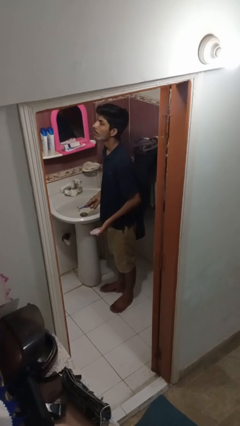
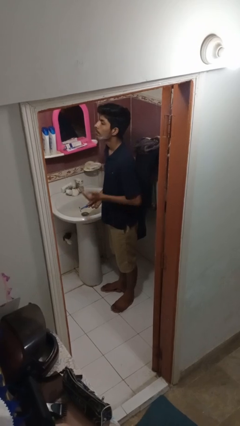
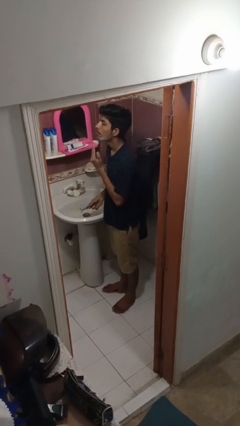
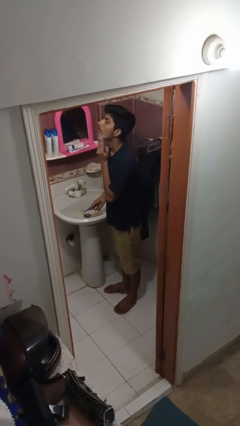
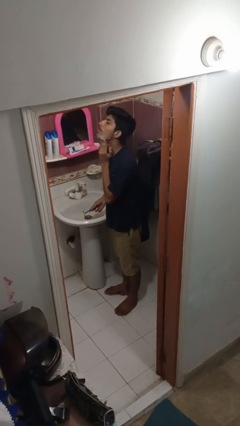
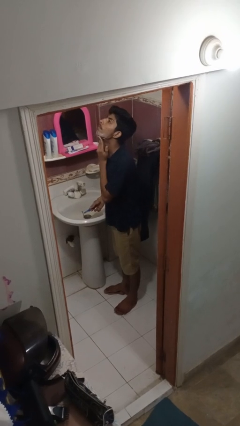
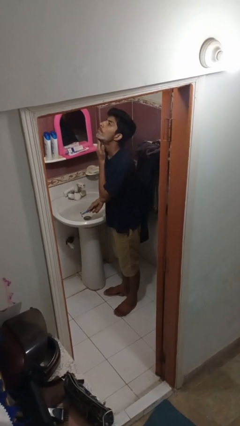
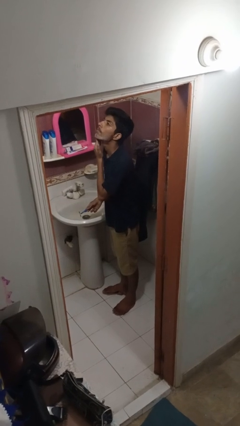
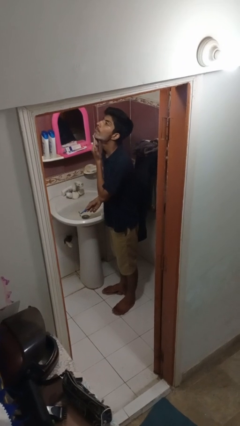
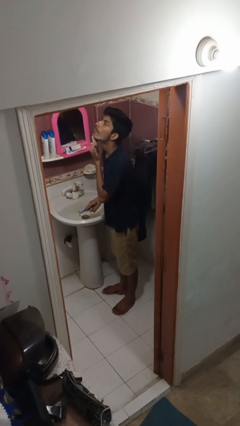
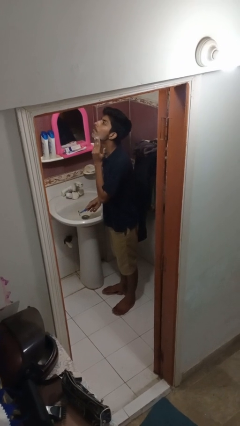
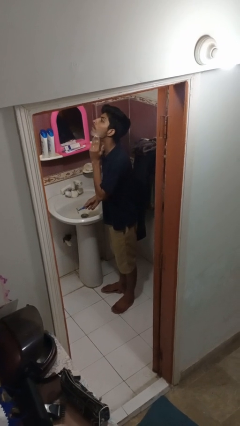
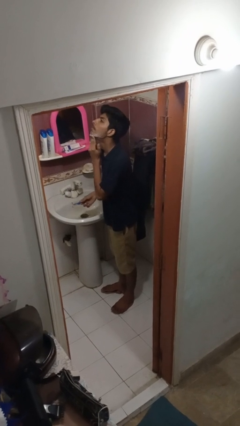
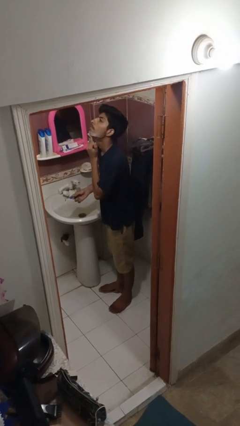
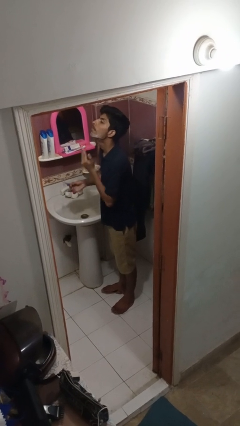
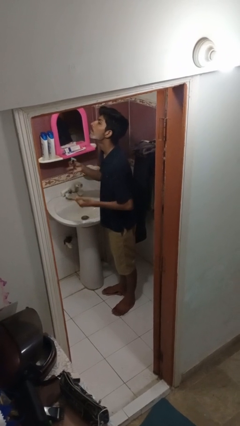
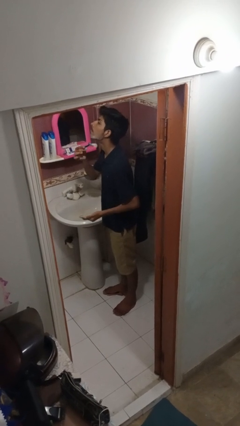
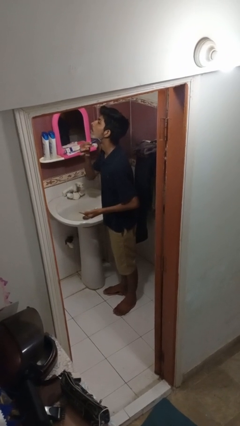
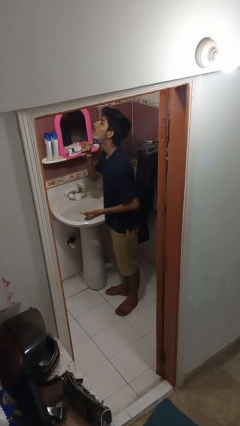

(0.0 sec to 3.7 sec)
person applies shaving cream

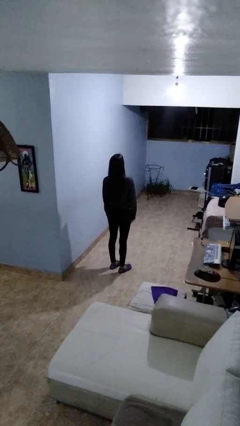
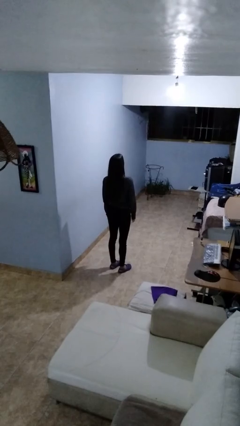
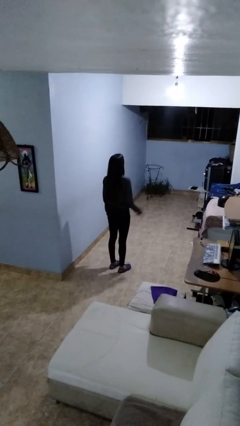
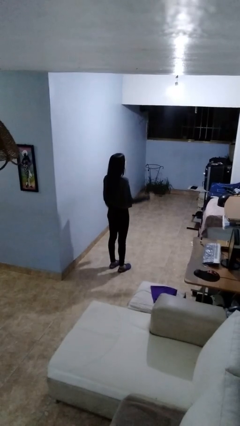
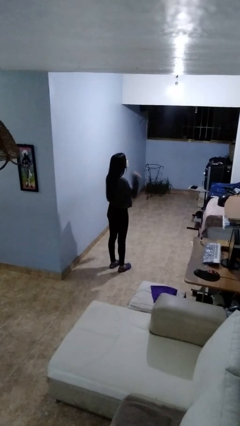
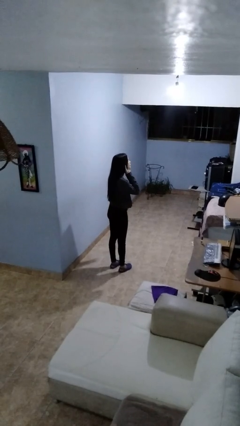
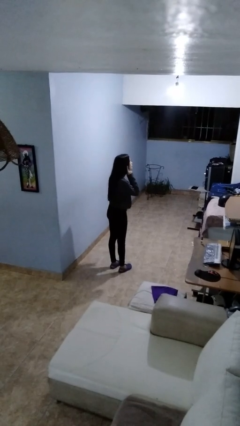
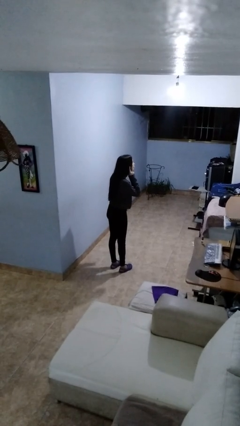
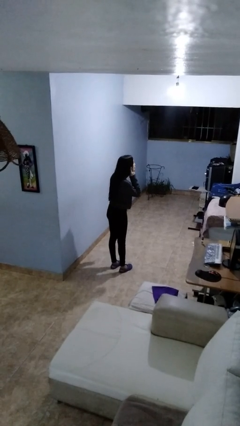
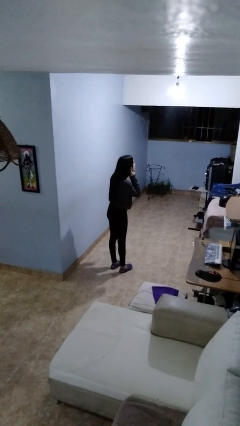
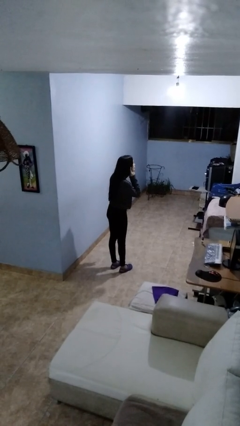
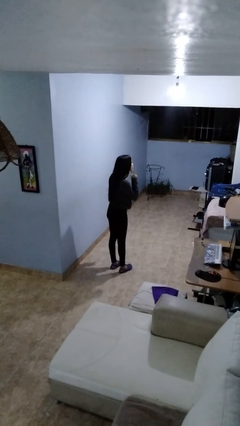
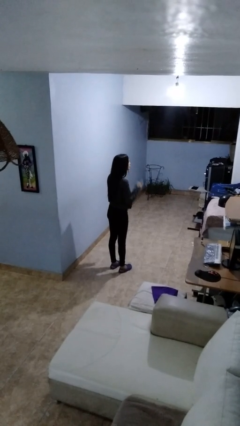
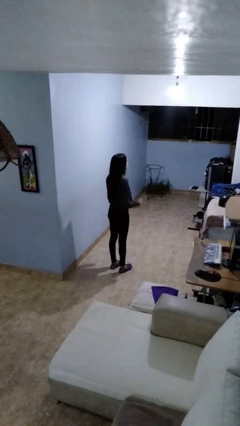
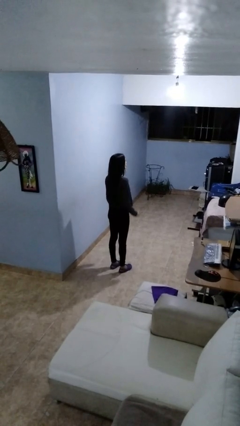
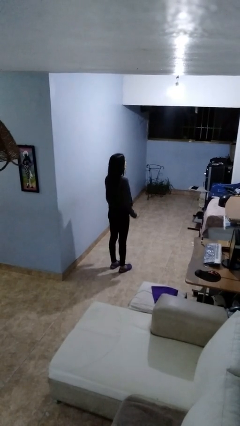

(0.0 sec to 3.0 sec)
person gestures listen closely

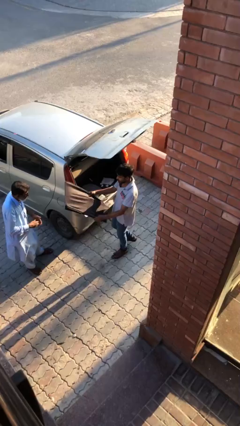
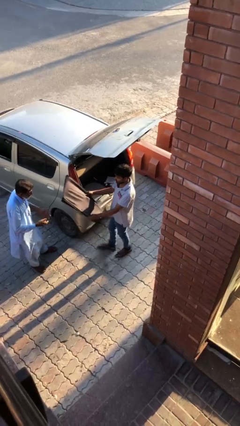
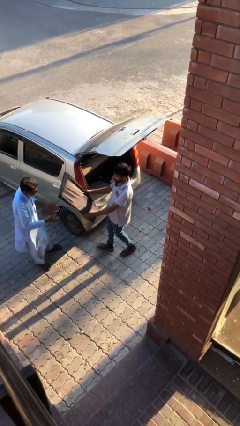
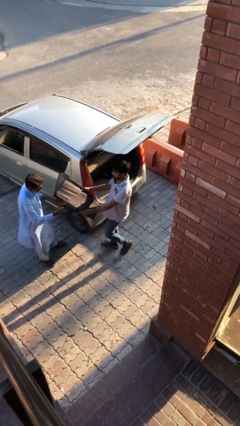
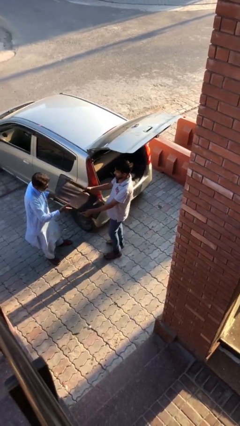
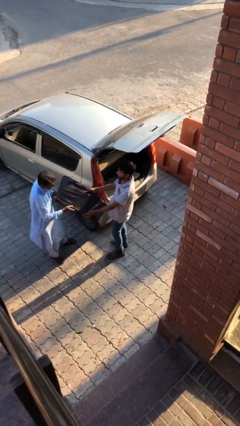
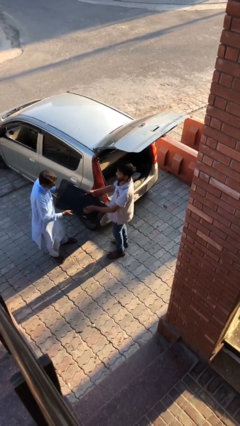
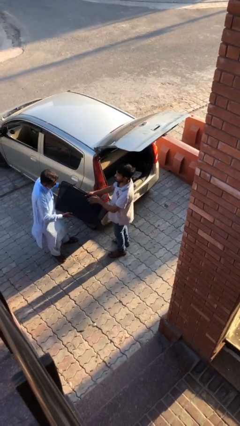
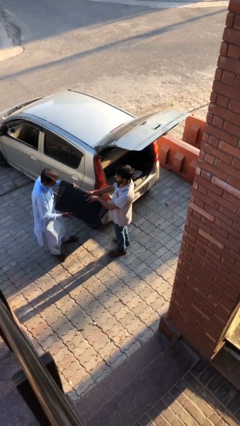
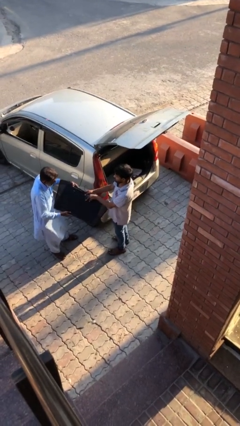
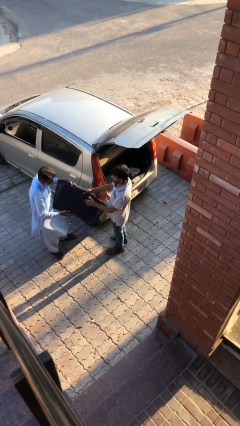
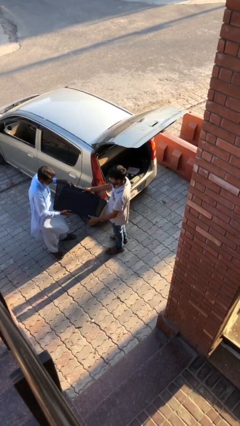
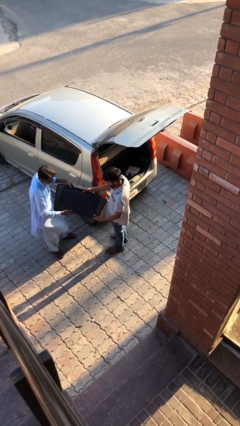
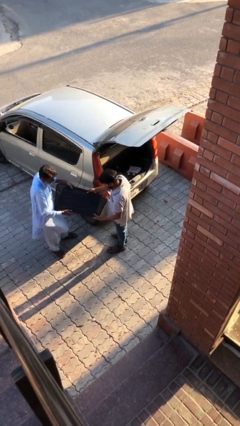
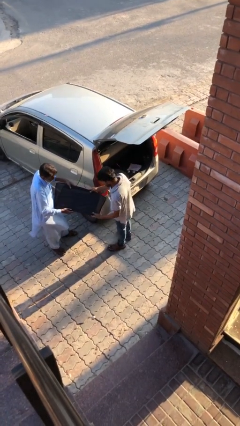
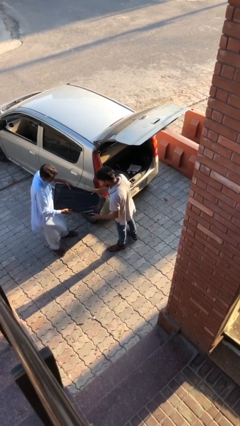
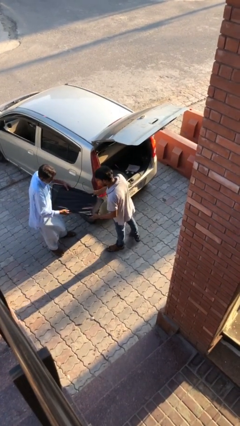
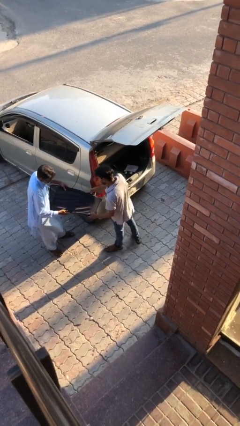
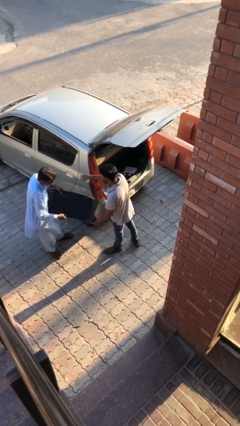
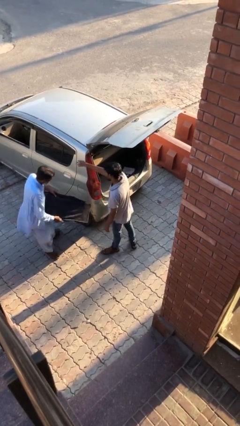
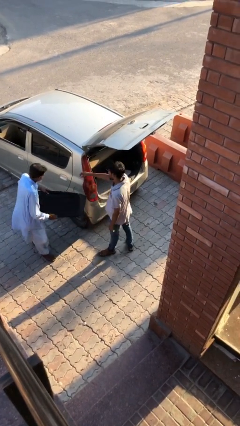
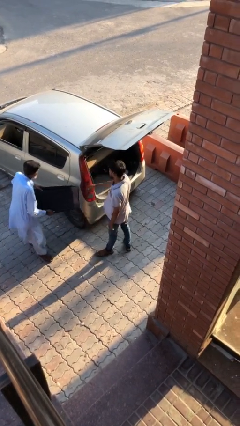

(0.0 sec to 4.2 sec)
person transfers object to person

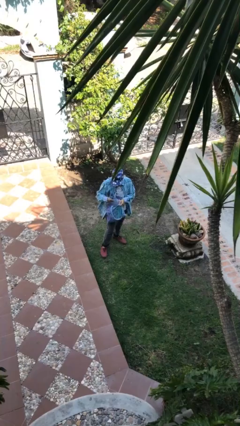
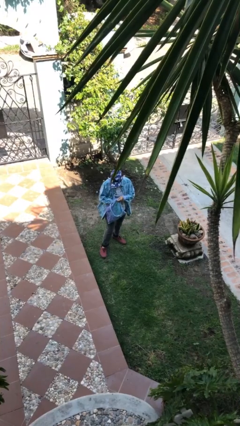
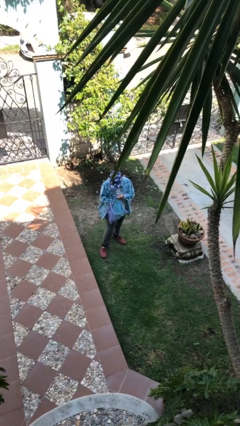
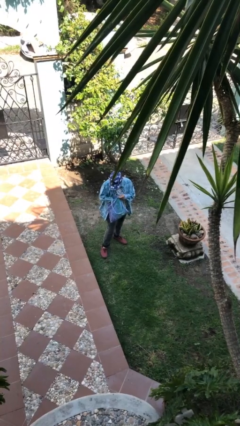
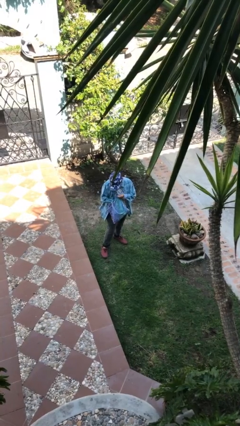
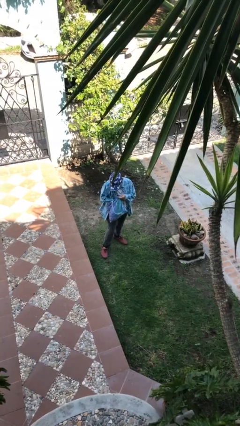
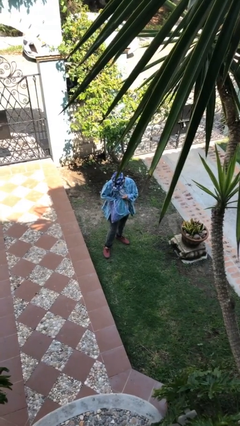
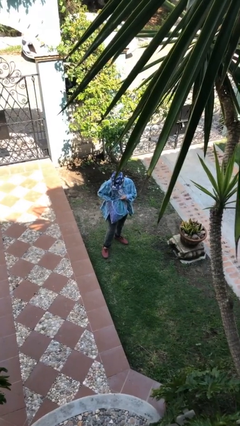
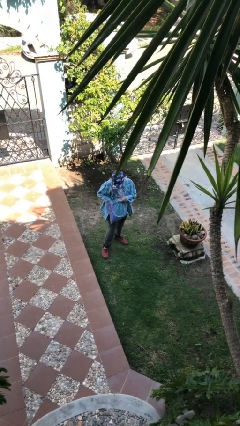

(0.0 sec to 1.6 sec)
person searches in purse

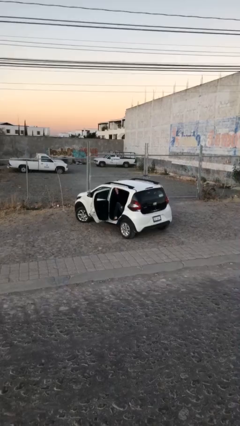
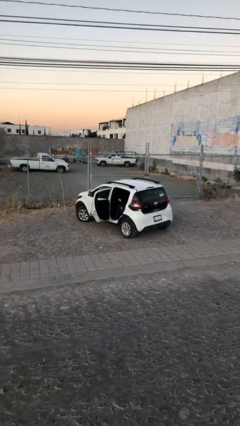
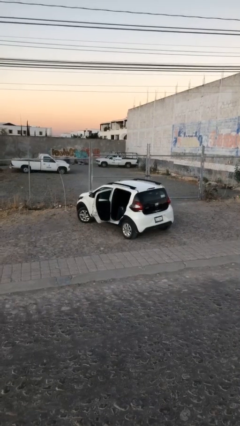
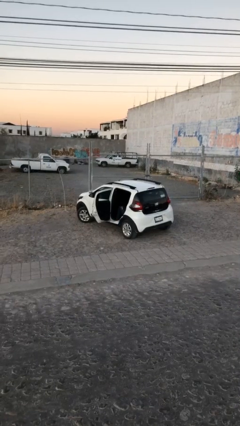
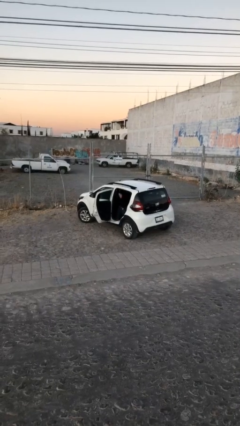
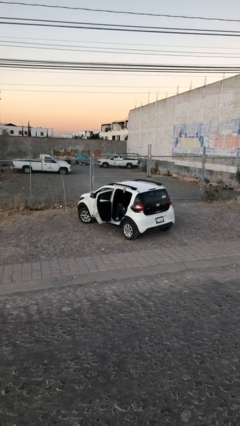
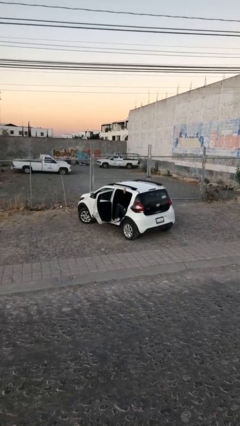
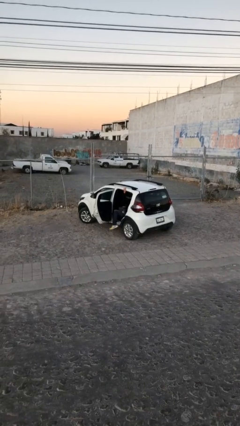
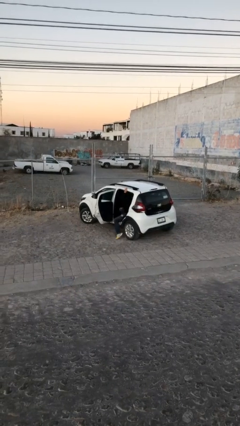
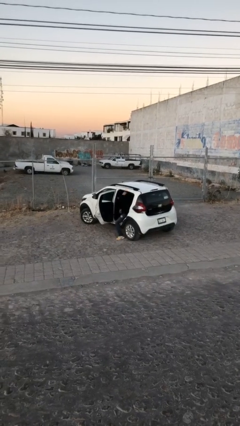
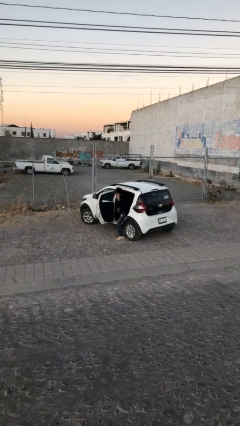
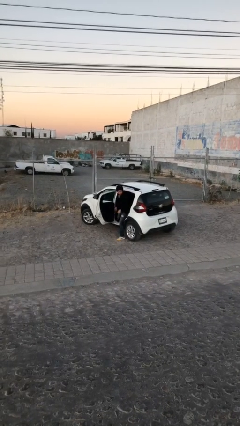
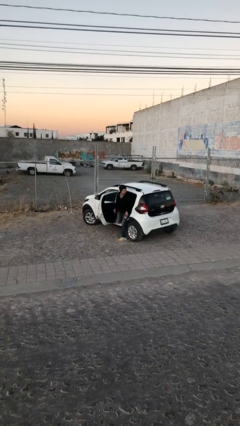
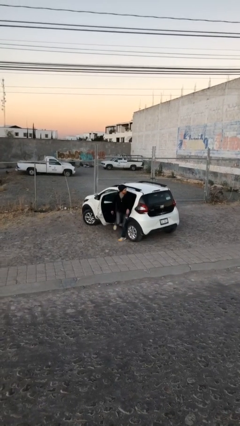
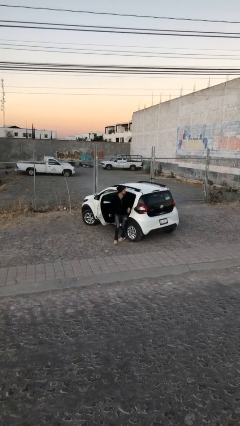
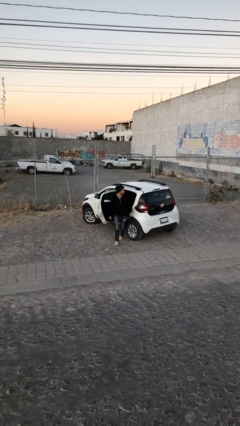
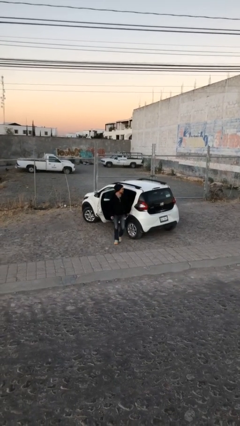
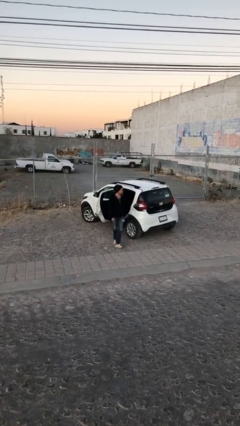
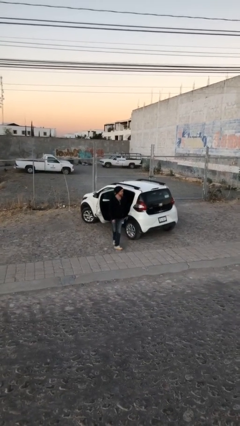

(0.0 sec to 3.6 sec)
person exits car

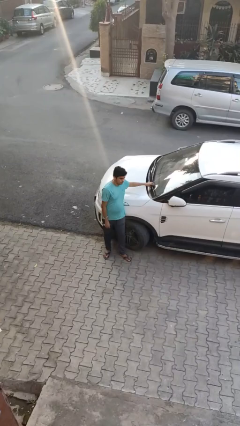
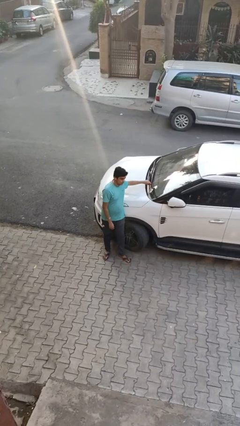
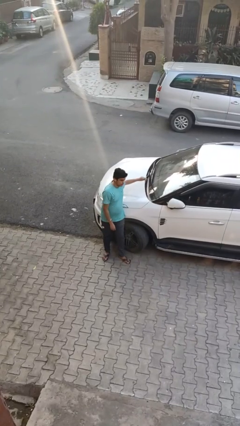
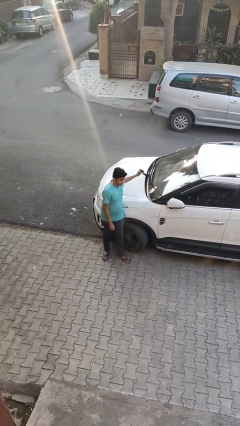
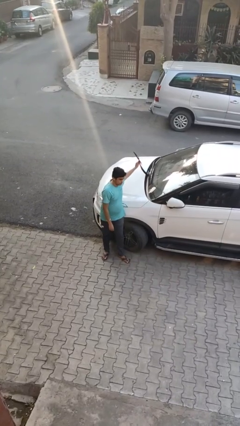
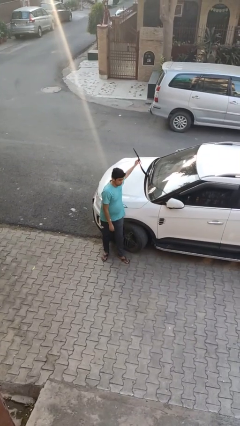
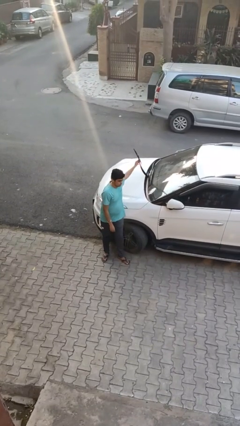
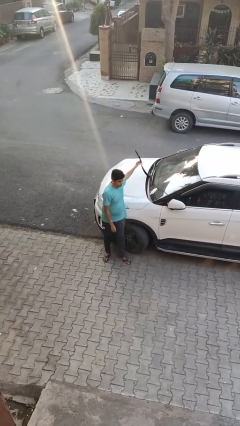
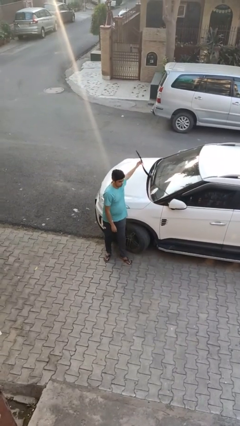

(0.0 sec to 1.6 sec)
person flips up car wipers
